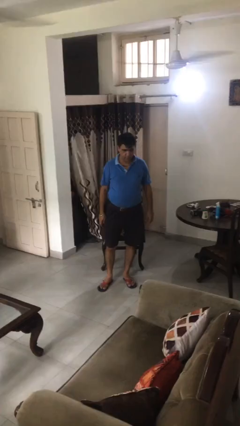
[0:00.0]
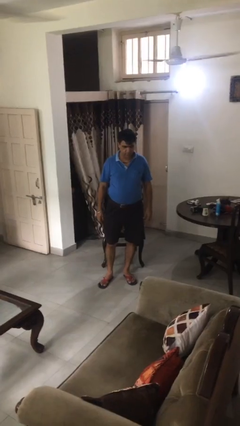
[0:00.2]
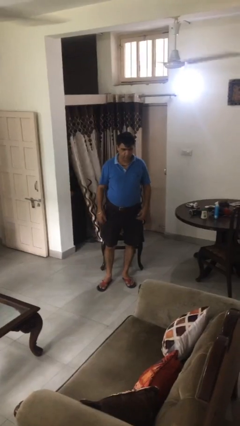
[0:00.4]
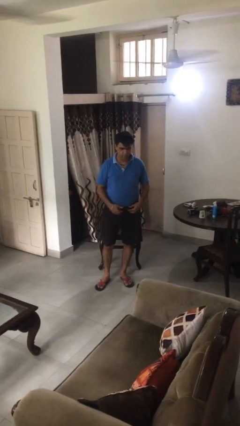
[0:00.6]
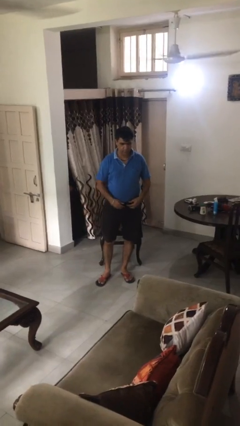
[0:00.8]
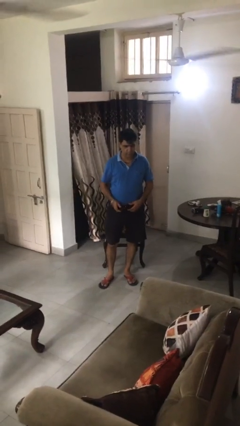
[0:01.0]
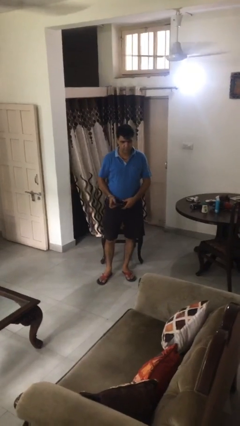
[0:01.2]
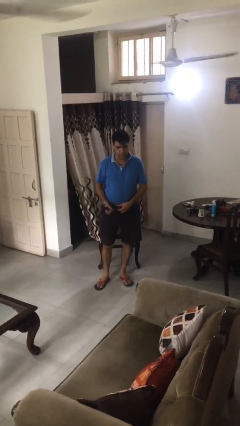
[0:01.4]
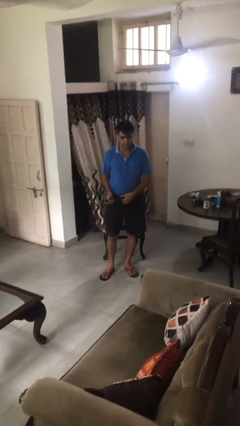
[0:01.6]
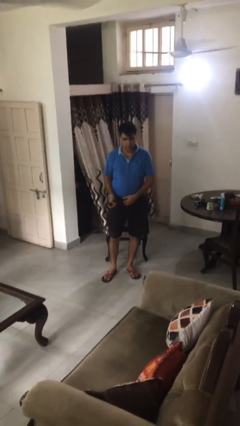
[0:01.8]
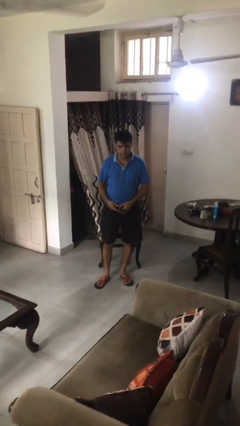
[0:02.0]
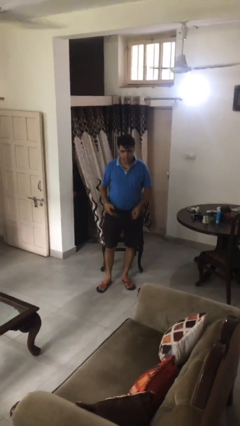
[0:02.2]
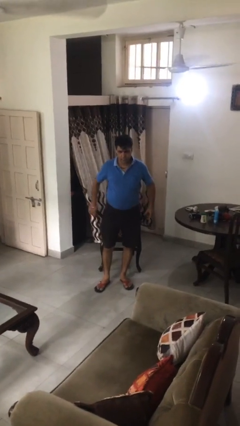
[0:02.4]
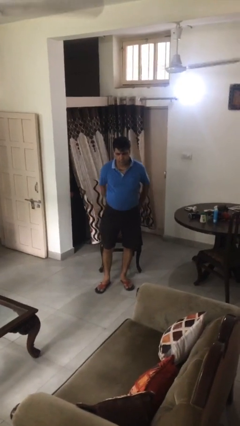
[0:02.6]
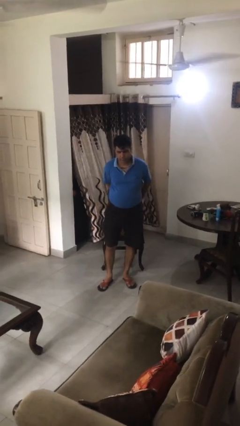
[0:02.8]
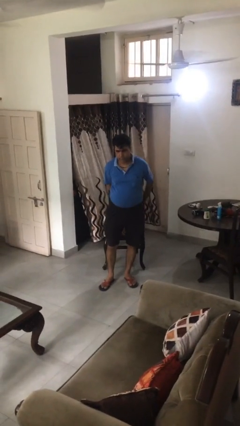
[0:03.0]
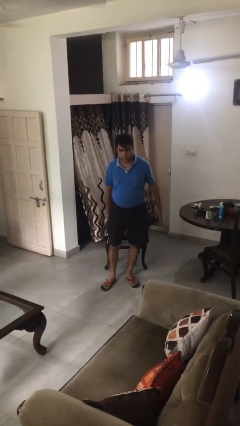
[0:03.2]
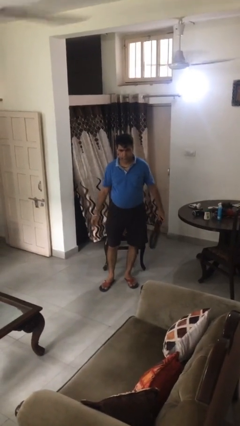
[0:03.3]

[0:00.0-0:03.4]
person takes off belt

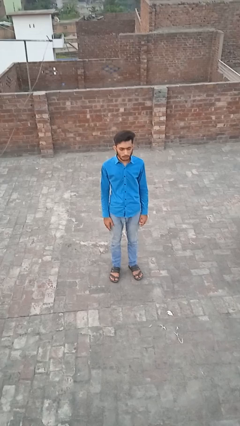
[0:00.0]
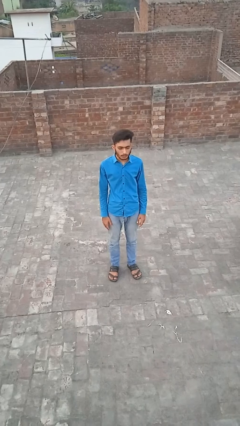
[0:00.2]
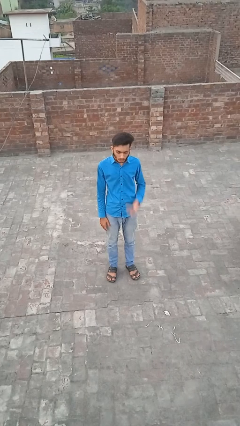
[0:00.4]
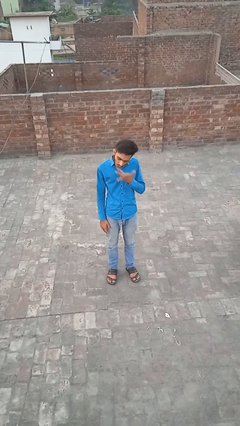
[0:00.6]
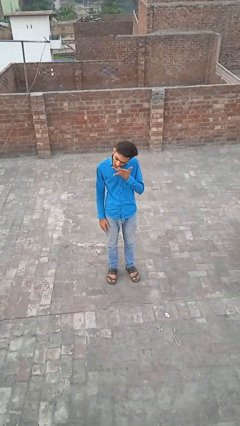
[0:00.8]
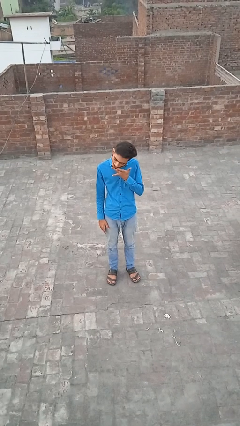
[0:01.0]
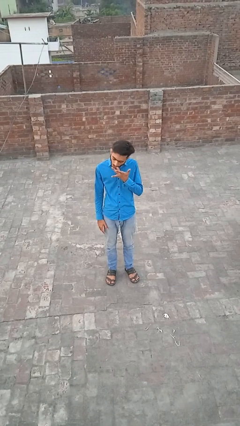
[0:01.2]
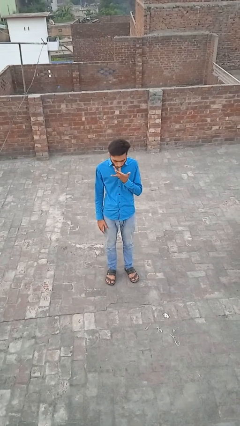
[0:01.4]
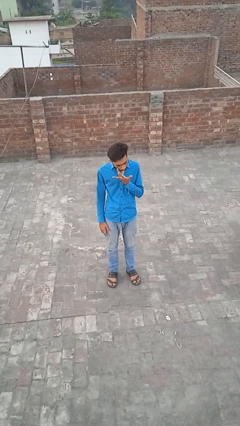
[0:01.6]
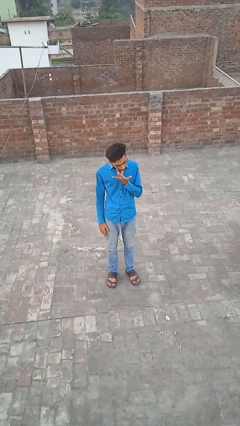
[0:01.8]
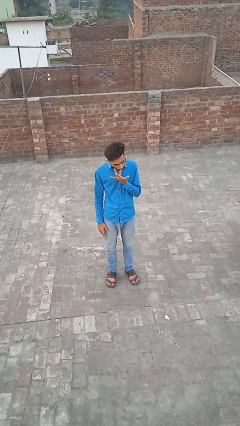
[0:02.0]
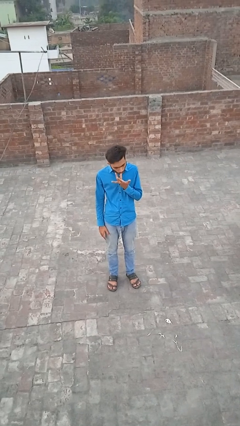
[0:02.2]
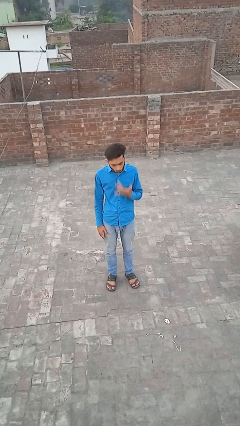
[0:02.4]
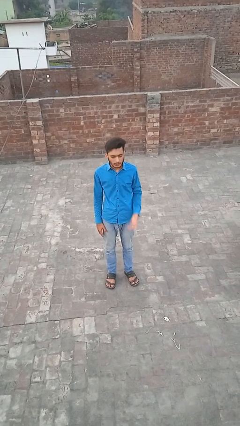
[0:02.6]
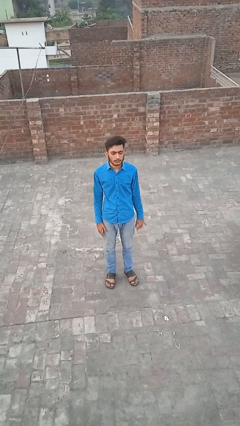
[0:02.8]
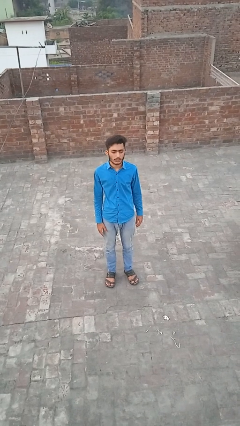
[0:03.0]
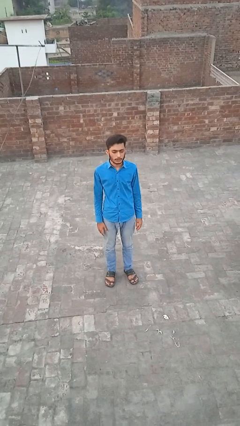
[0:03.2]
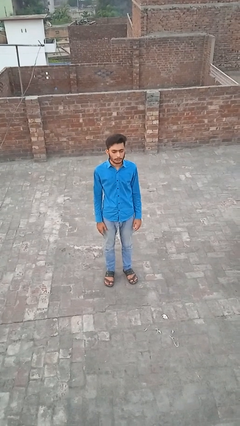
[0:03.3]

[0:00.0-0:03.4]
person licks fingers

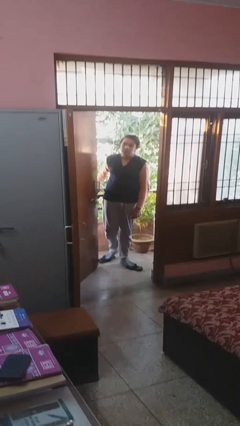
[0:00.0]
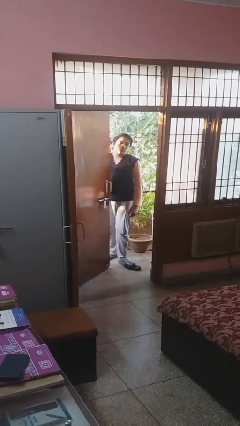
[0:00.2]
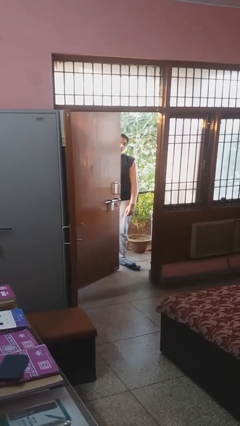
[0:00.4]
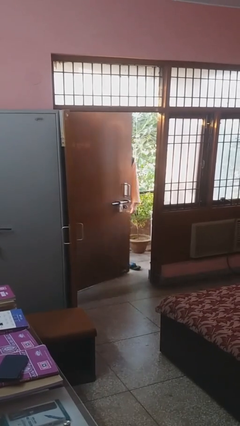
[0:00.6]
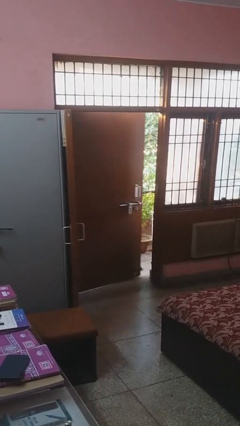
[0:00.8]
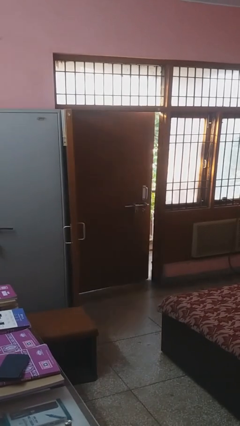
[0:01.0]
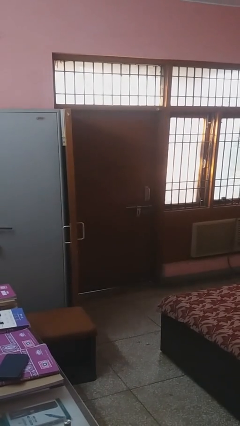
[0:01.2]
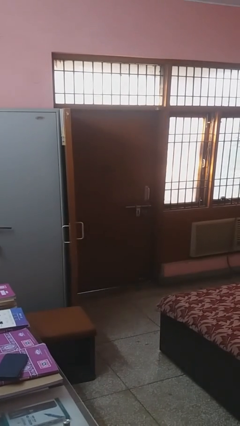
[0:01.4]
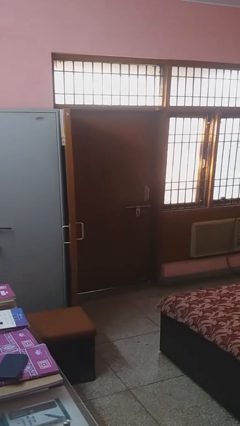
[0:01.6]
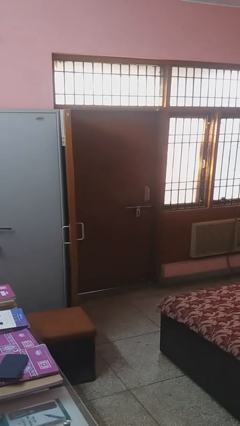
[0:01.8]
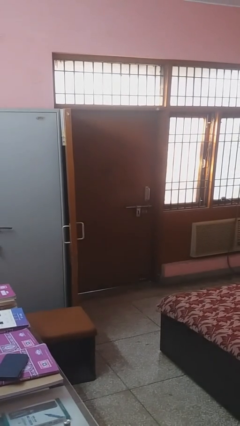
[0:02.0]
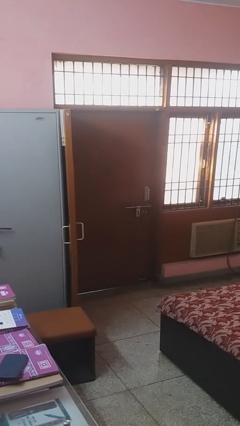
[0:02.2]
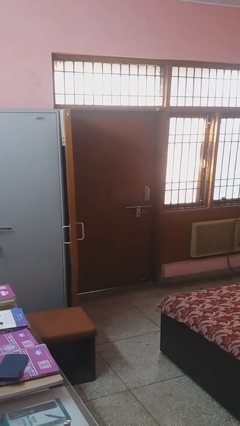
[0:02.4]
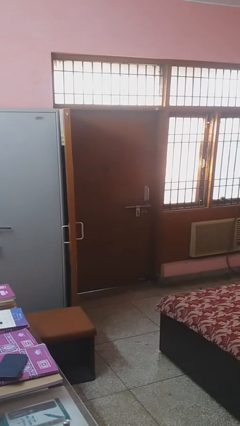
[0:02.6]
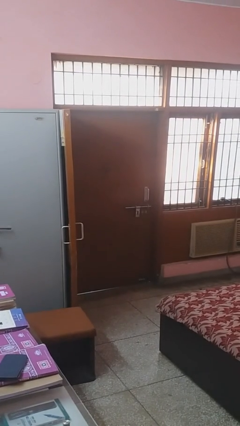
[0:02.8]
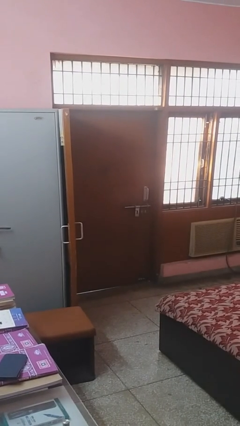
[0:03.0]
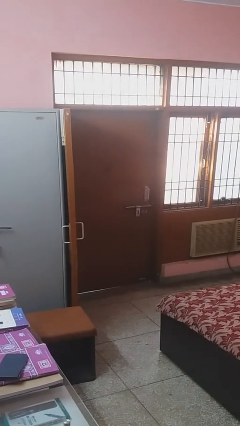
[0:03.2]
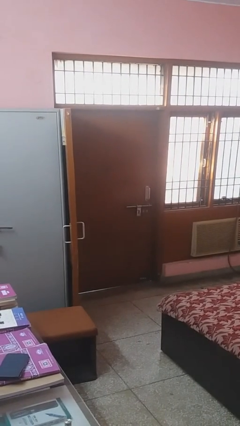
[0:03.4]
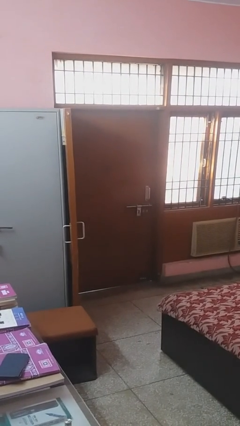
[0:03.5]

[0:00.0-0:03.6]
person closes facility door

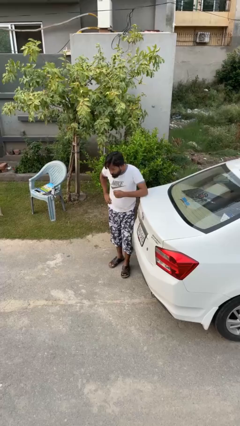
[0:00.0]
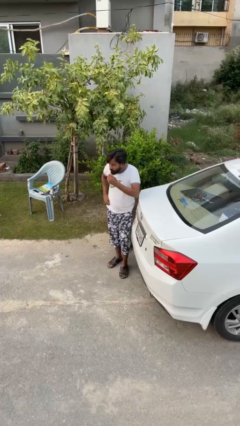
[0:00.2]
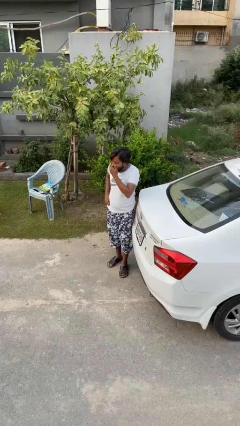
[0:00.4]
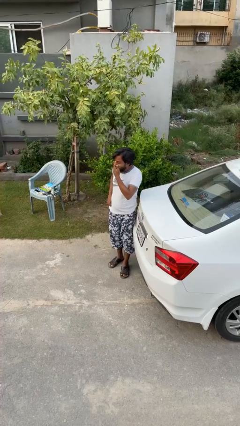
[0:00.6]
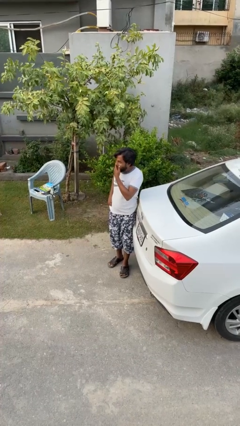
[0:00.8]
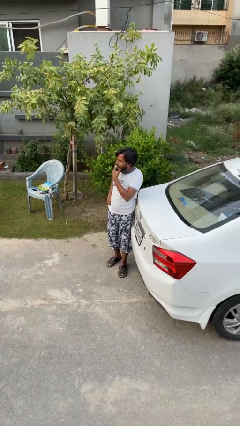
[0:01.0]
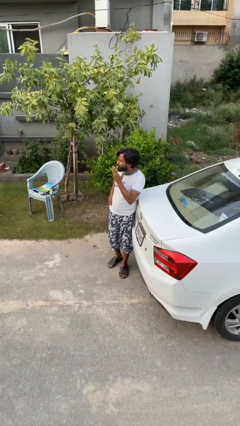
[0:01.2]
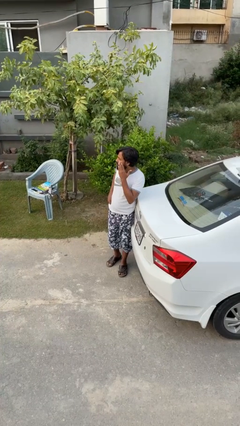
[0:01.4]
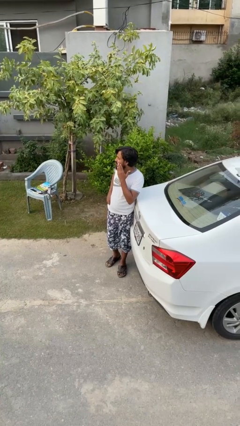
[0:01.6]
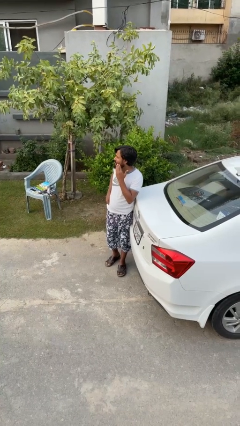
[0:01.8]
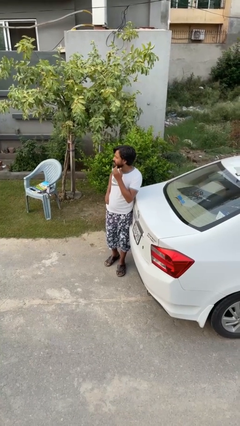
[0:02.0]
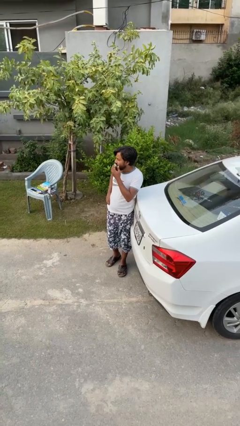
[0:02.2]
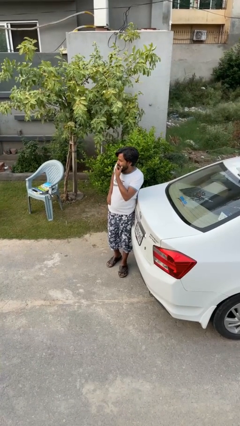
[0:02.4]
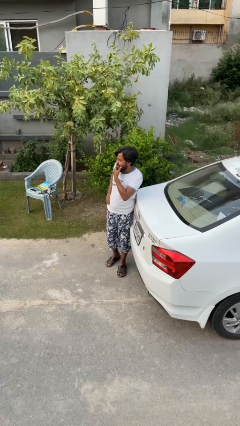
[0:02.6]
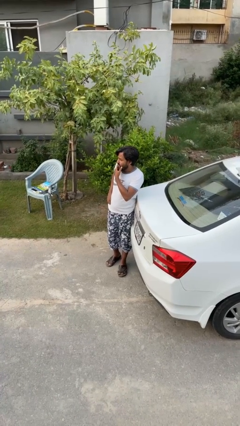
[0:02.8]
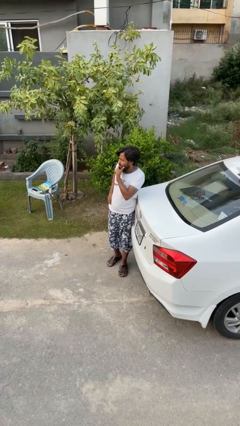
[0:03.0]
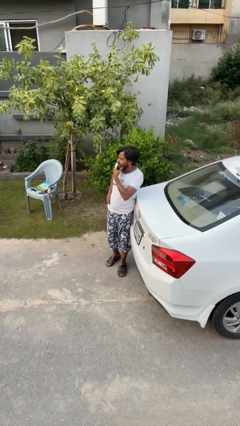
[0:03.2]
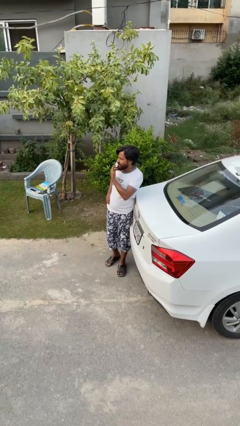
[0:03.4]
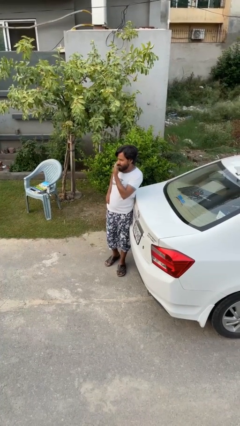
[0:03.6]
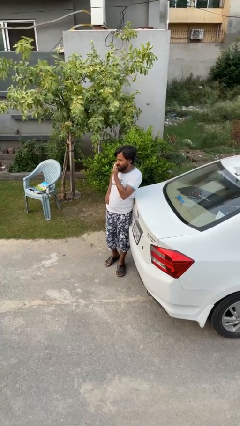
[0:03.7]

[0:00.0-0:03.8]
person scratches face

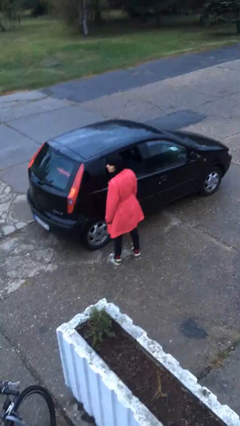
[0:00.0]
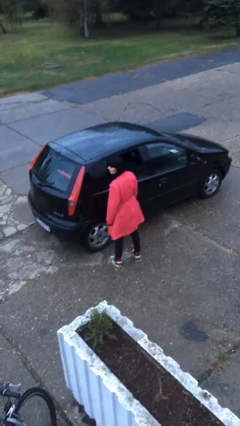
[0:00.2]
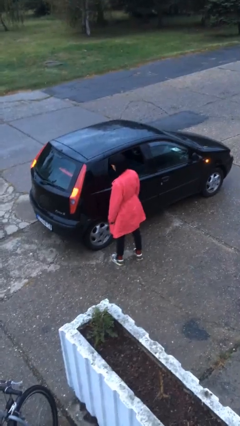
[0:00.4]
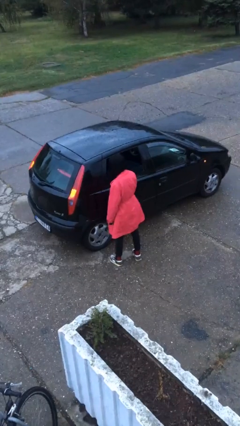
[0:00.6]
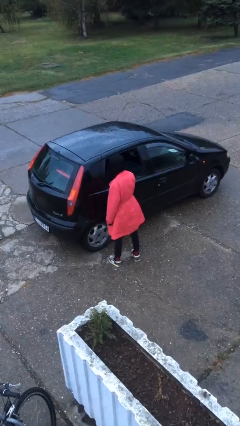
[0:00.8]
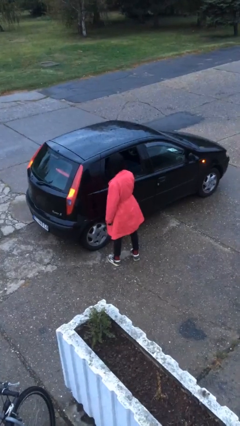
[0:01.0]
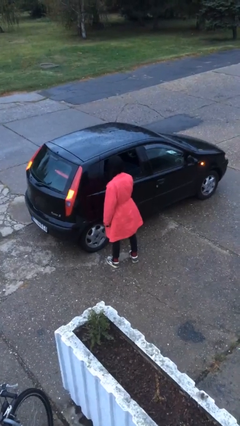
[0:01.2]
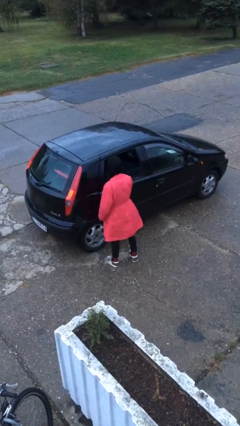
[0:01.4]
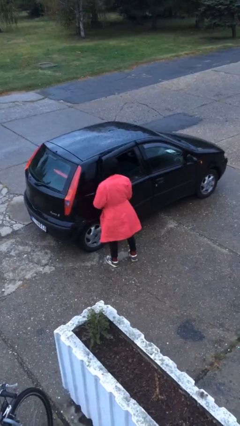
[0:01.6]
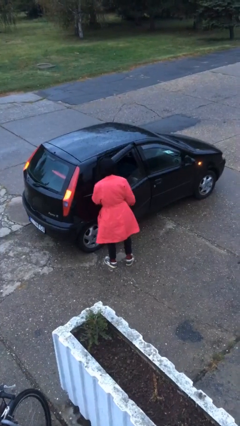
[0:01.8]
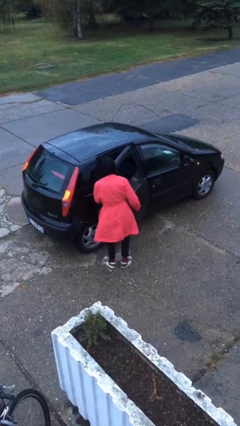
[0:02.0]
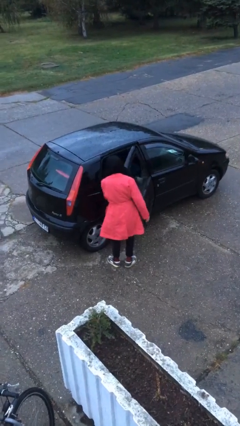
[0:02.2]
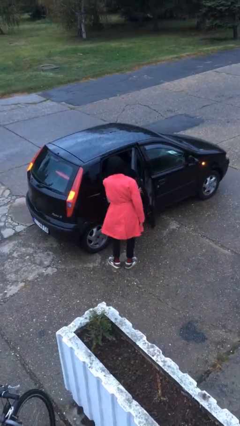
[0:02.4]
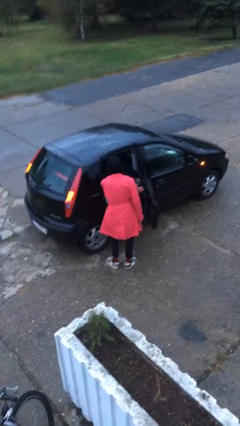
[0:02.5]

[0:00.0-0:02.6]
person opens car door

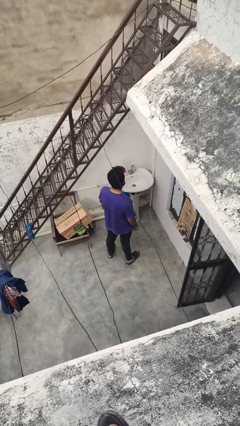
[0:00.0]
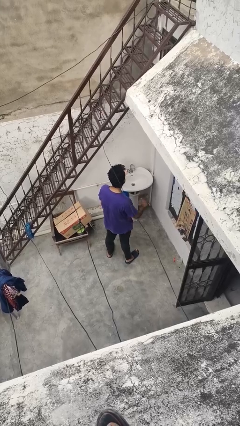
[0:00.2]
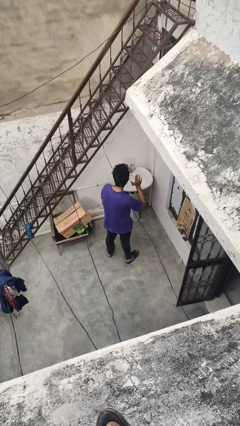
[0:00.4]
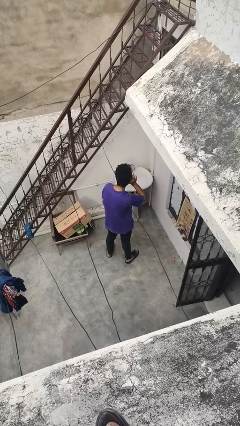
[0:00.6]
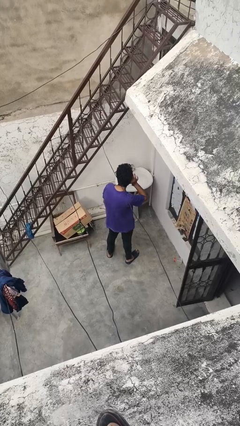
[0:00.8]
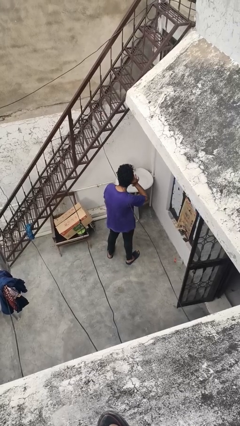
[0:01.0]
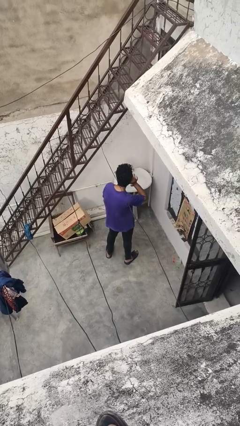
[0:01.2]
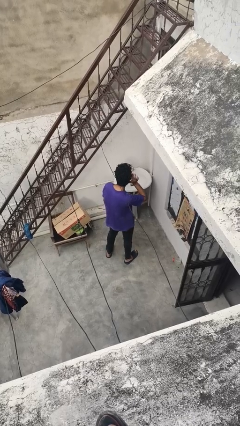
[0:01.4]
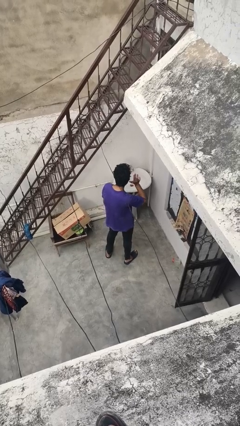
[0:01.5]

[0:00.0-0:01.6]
person gestures listen closely
